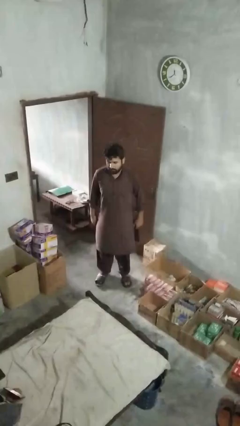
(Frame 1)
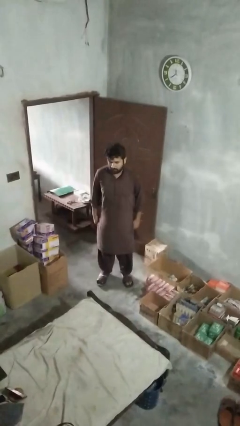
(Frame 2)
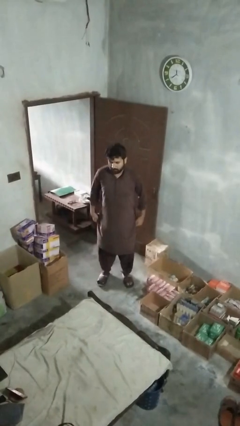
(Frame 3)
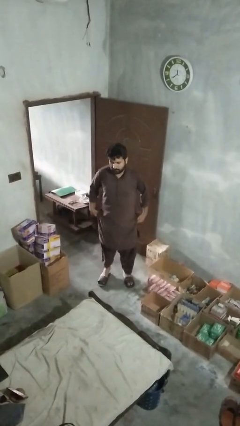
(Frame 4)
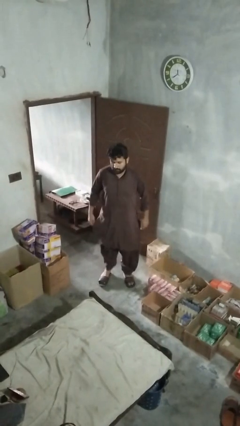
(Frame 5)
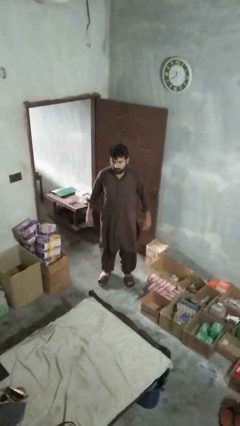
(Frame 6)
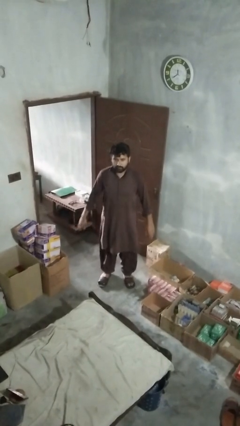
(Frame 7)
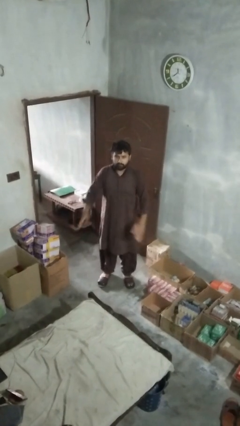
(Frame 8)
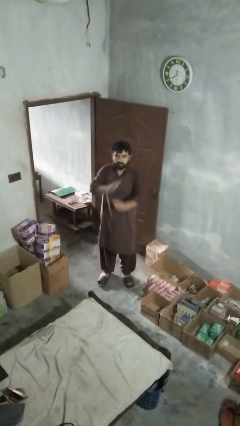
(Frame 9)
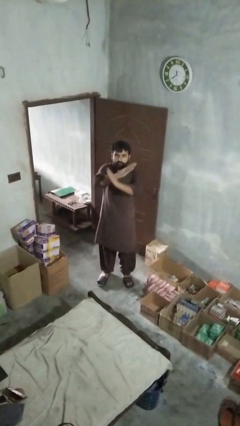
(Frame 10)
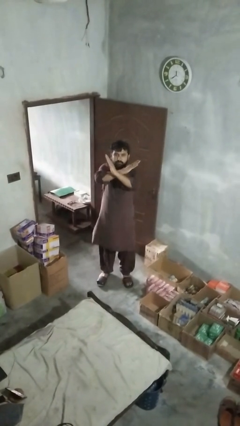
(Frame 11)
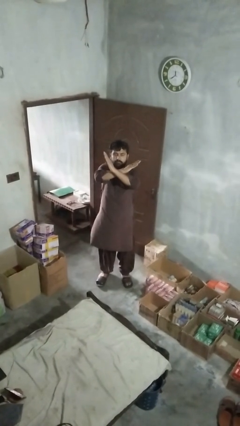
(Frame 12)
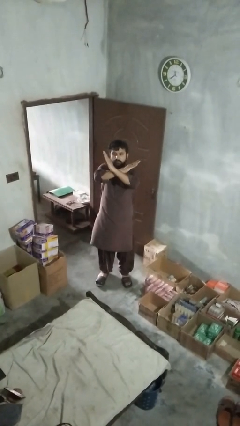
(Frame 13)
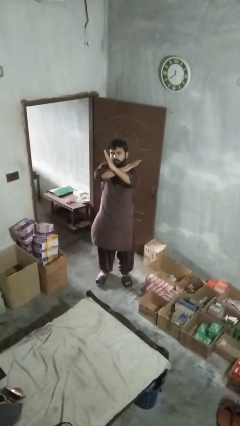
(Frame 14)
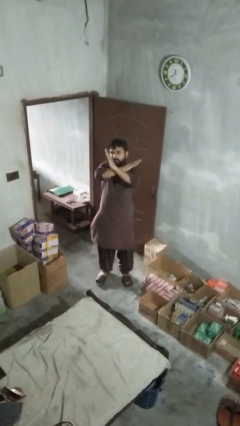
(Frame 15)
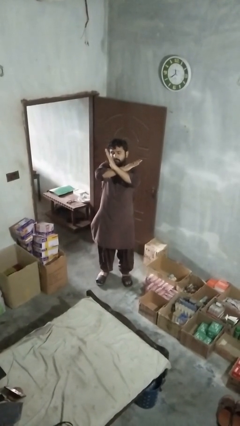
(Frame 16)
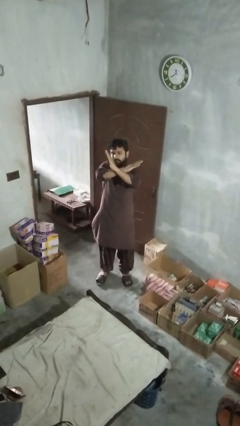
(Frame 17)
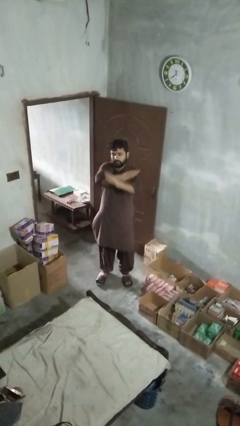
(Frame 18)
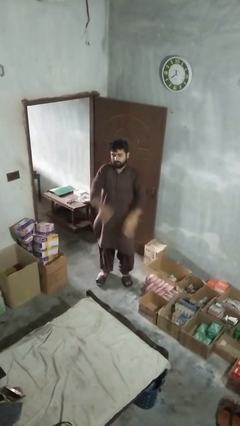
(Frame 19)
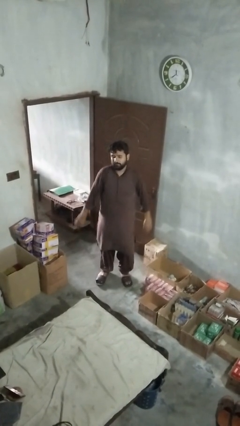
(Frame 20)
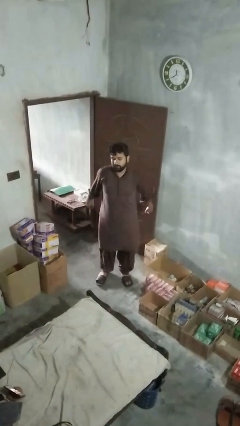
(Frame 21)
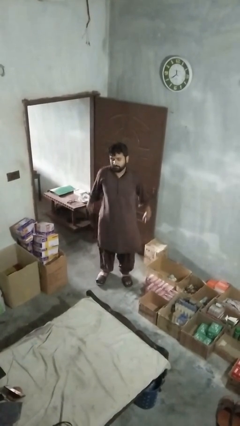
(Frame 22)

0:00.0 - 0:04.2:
person gestures arms x

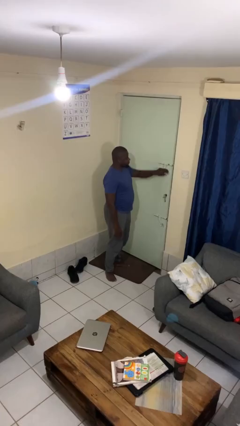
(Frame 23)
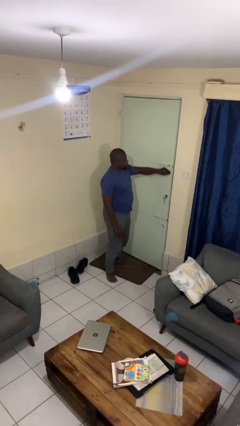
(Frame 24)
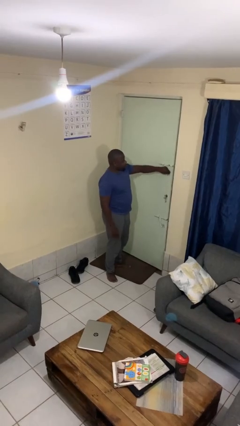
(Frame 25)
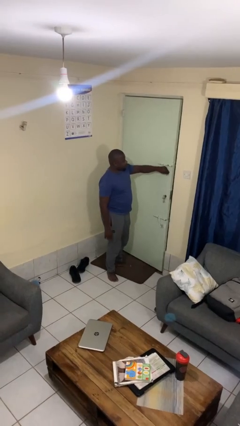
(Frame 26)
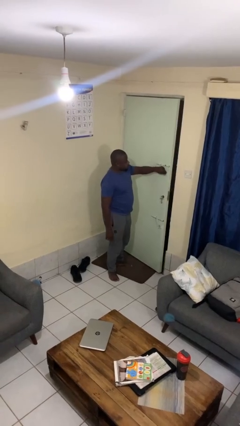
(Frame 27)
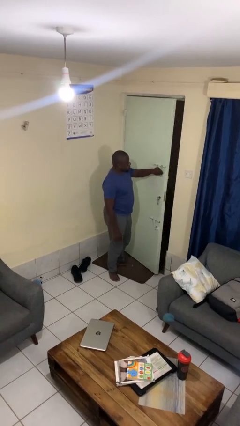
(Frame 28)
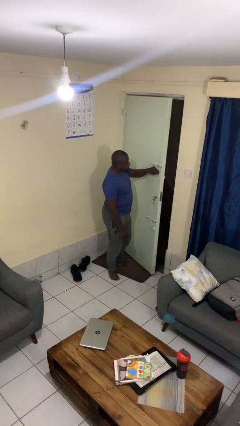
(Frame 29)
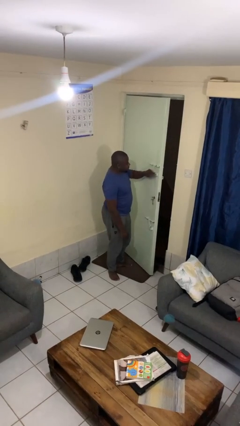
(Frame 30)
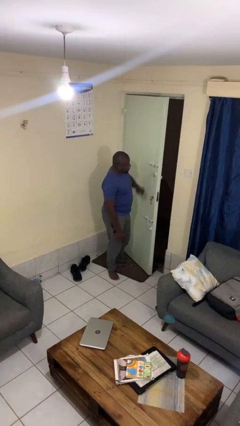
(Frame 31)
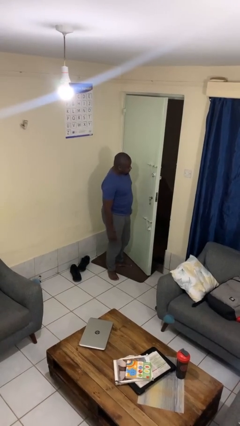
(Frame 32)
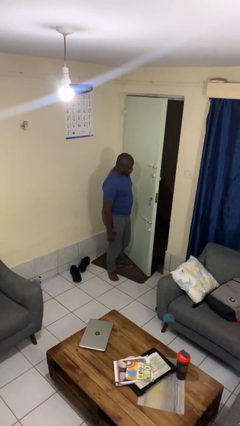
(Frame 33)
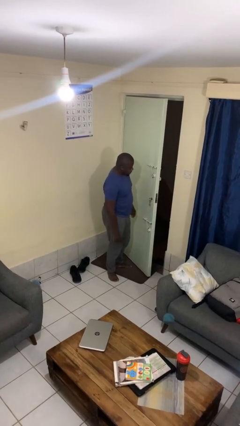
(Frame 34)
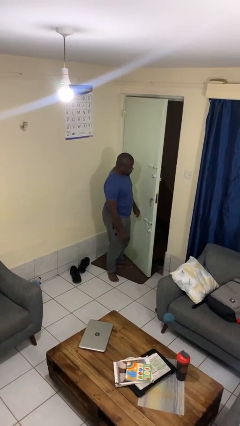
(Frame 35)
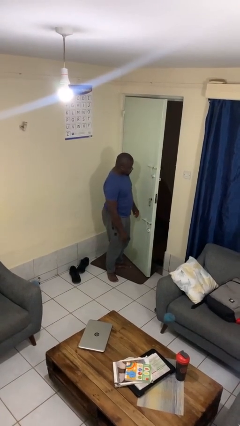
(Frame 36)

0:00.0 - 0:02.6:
person opens facility door

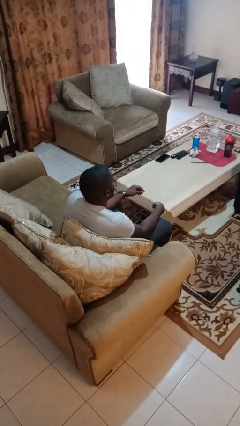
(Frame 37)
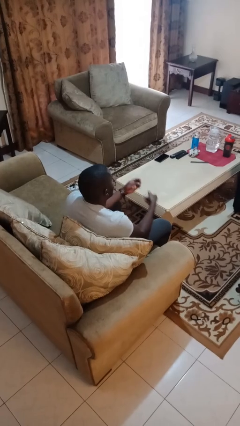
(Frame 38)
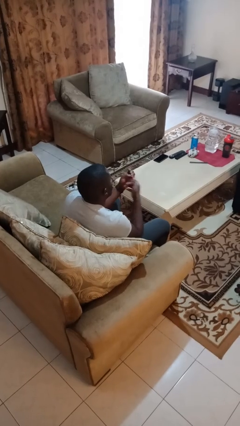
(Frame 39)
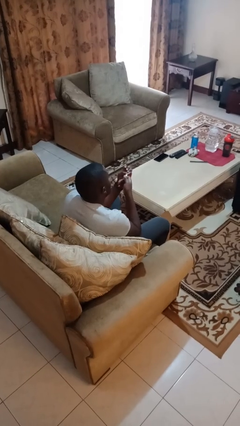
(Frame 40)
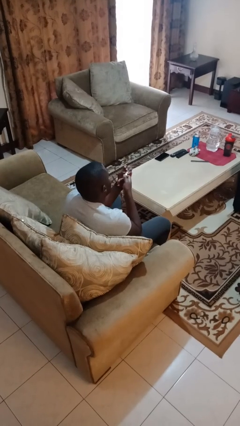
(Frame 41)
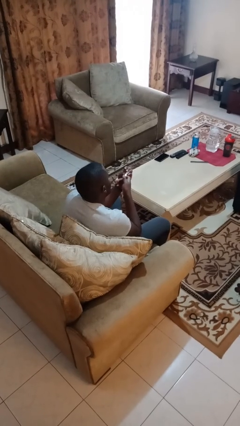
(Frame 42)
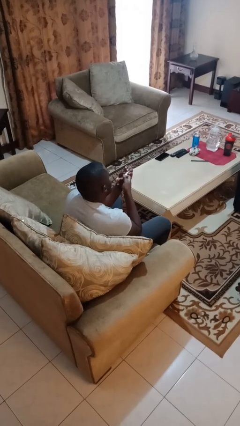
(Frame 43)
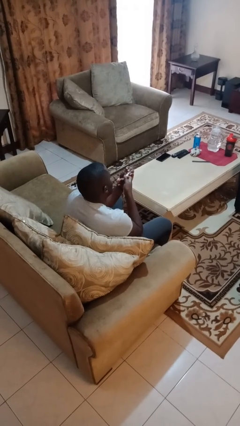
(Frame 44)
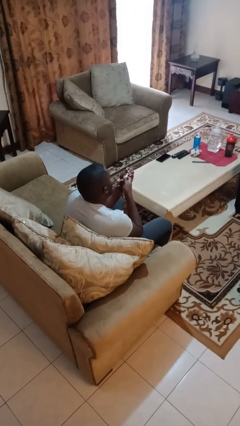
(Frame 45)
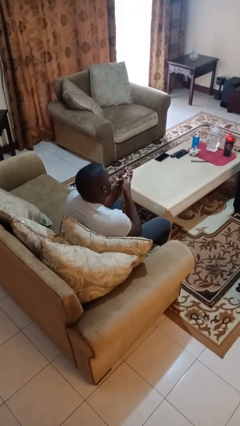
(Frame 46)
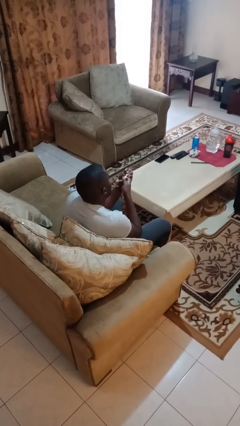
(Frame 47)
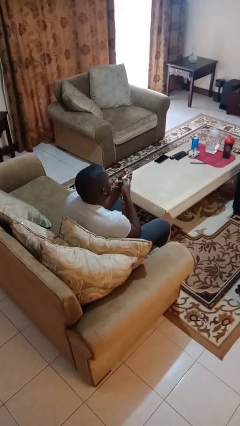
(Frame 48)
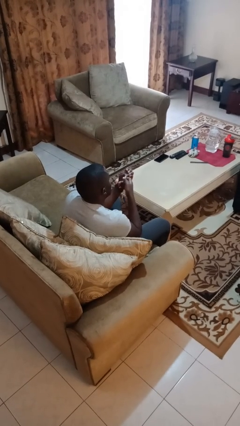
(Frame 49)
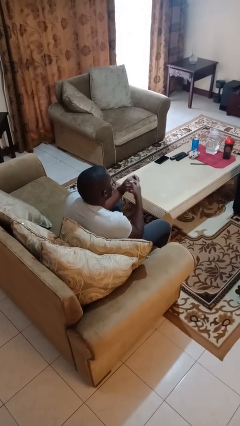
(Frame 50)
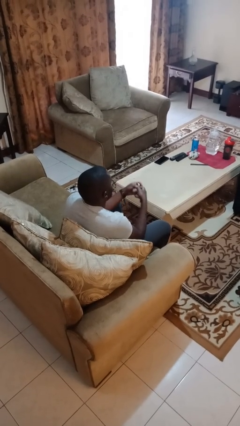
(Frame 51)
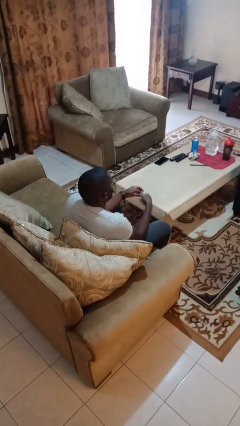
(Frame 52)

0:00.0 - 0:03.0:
person clips fingernails

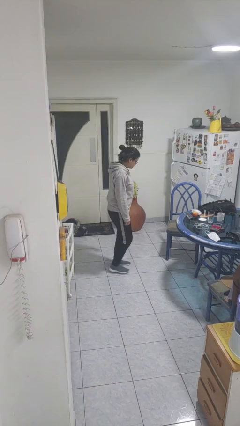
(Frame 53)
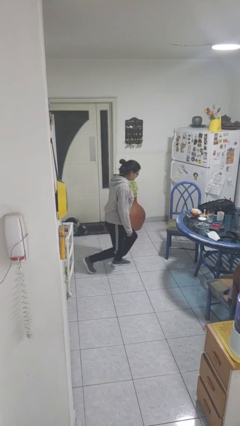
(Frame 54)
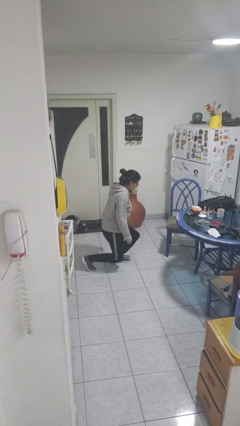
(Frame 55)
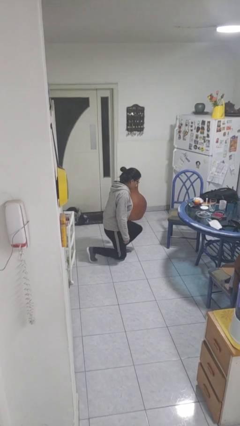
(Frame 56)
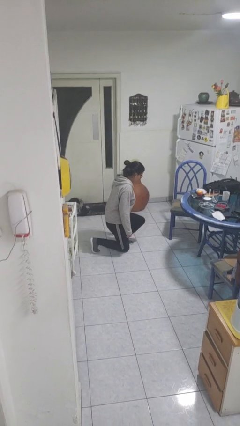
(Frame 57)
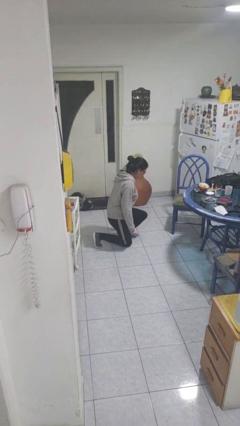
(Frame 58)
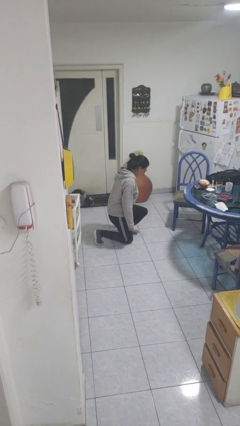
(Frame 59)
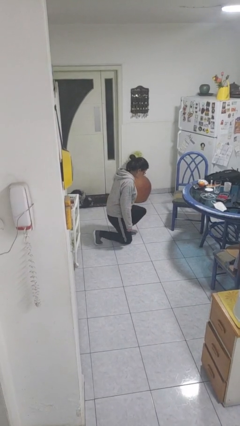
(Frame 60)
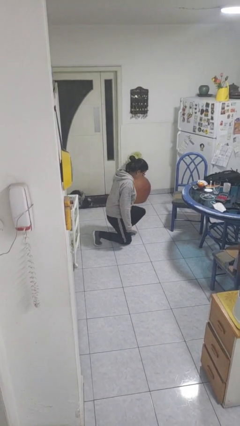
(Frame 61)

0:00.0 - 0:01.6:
person kneels

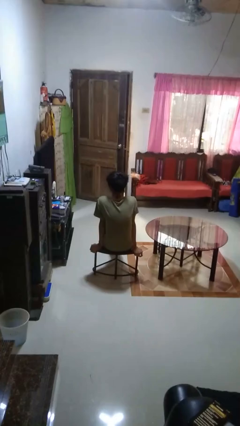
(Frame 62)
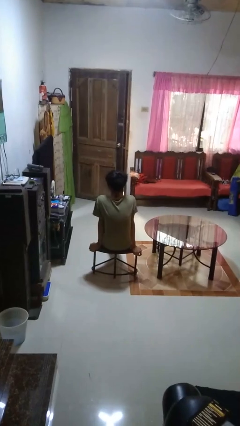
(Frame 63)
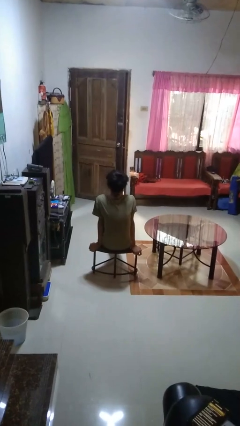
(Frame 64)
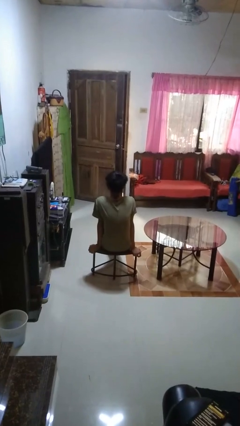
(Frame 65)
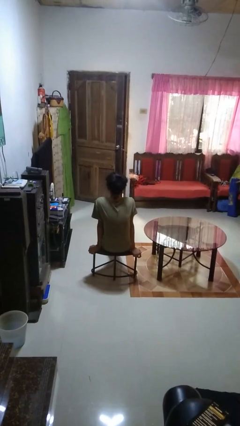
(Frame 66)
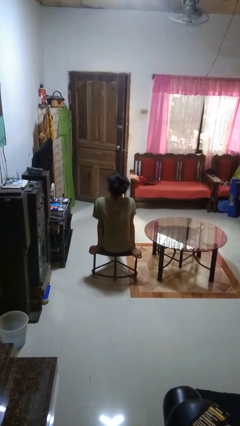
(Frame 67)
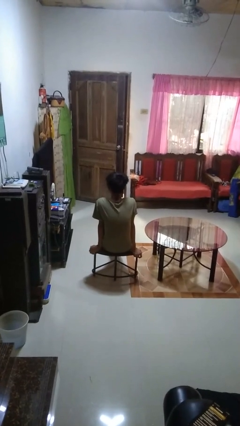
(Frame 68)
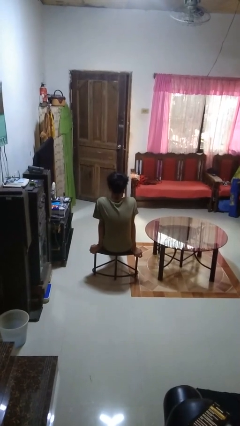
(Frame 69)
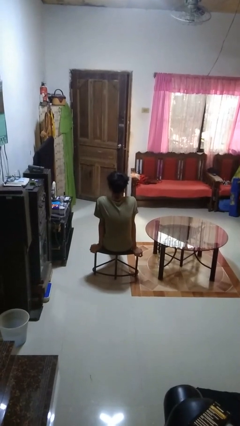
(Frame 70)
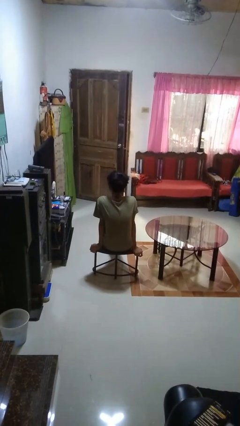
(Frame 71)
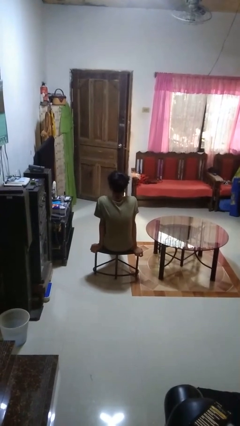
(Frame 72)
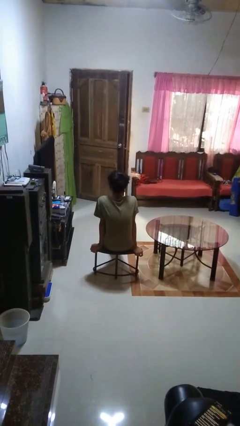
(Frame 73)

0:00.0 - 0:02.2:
person nods head

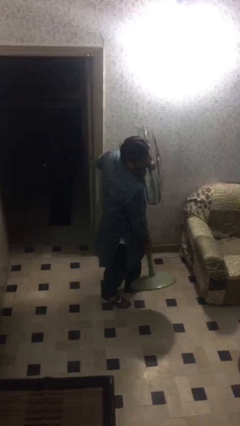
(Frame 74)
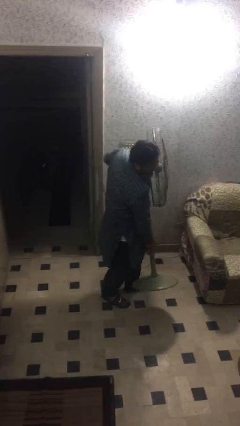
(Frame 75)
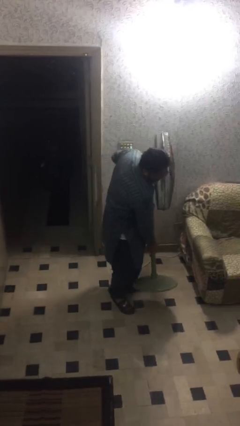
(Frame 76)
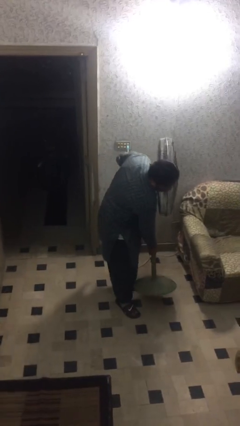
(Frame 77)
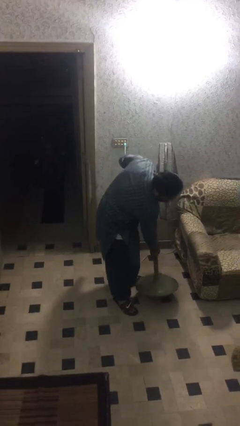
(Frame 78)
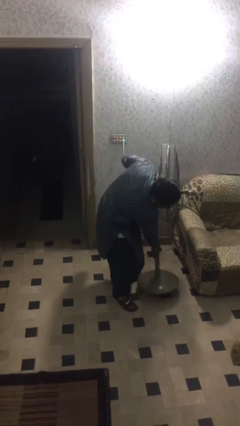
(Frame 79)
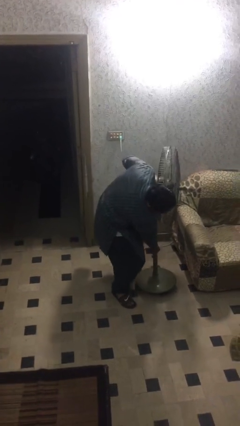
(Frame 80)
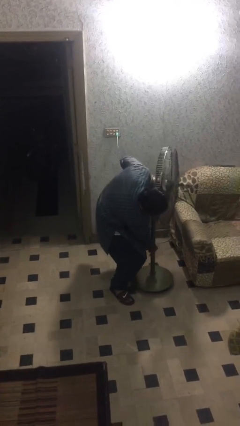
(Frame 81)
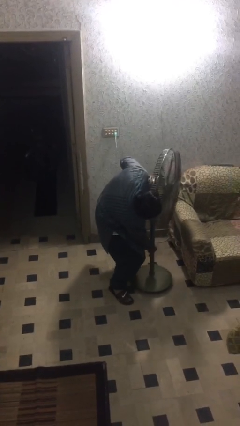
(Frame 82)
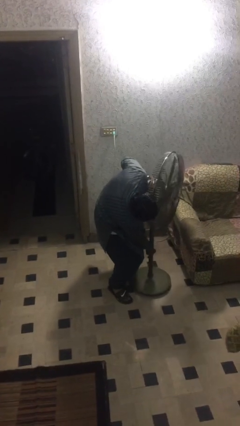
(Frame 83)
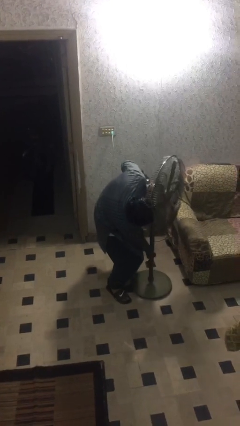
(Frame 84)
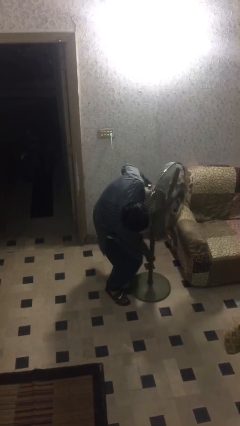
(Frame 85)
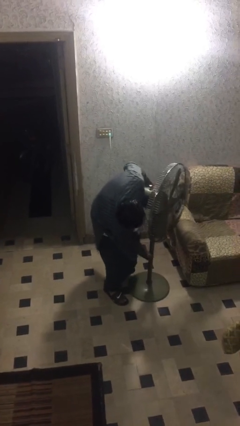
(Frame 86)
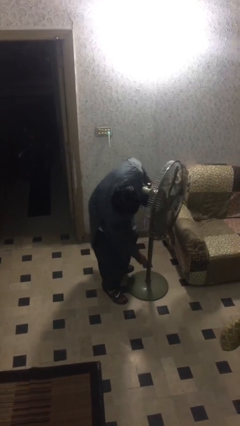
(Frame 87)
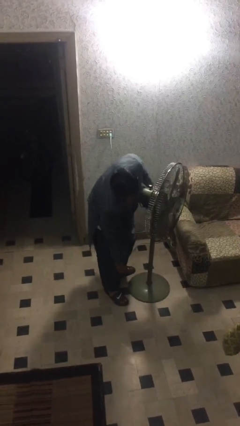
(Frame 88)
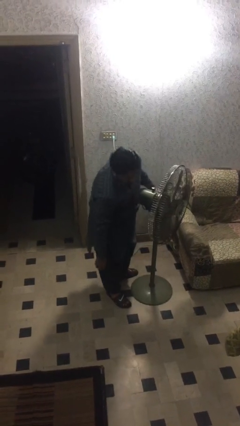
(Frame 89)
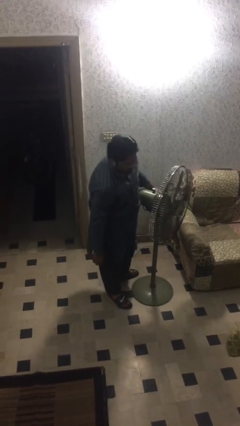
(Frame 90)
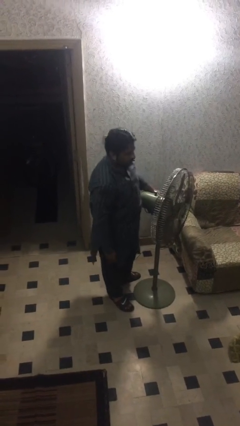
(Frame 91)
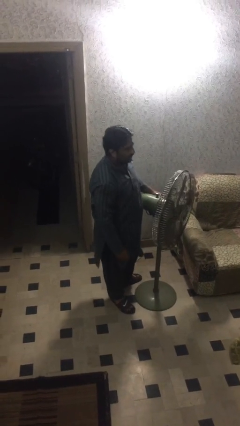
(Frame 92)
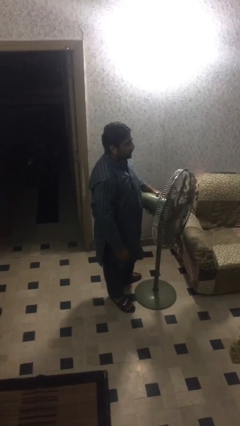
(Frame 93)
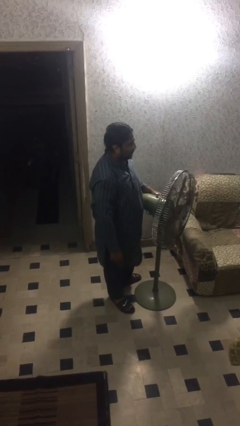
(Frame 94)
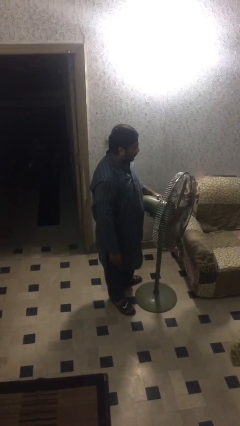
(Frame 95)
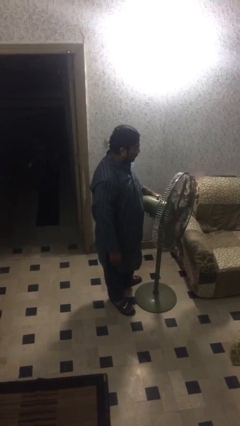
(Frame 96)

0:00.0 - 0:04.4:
person puts down object on floor
